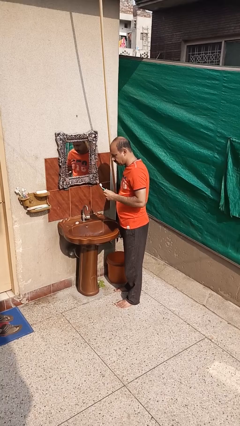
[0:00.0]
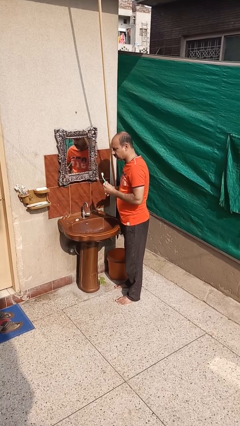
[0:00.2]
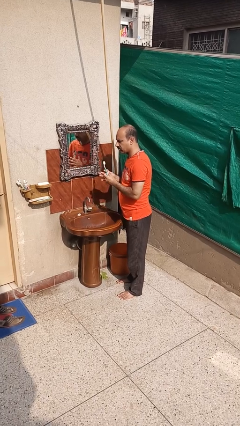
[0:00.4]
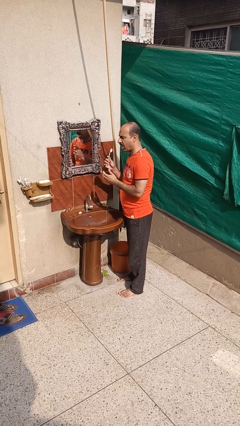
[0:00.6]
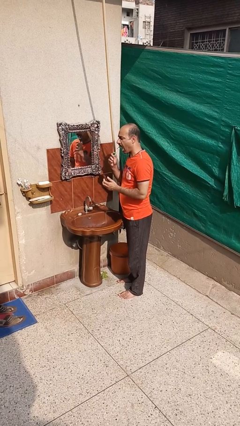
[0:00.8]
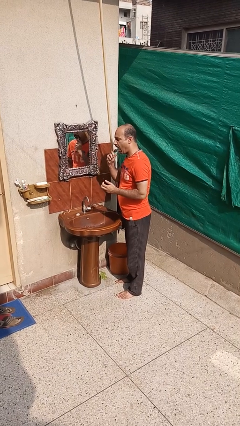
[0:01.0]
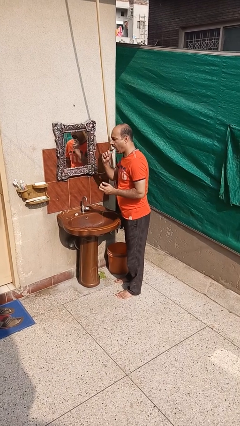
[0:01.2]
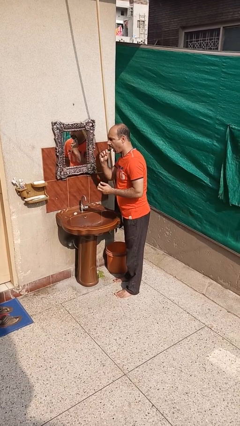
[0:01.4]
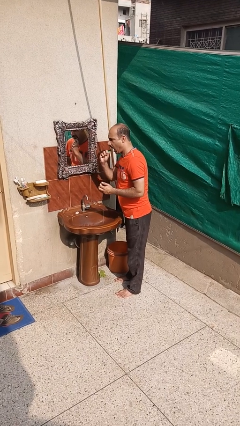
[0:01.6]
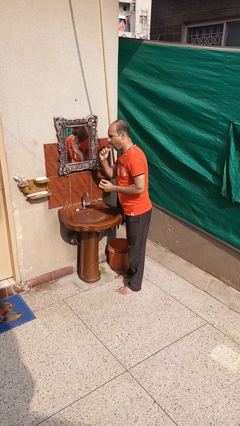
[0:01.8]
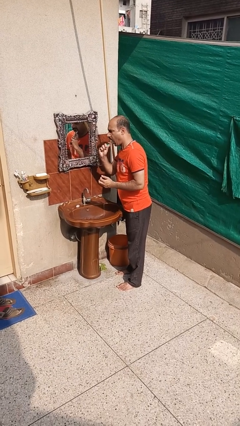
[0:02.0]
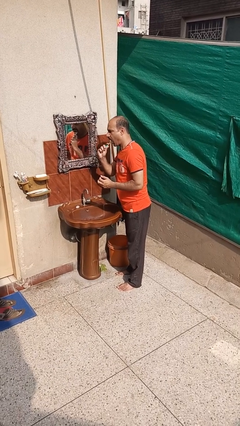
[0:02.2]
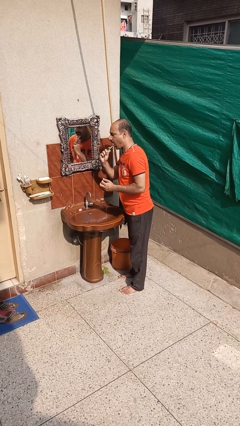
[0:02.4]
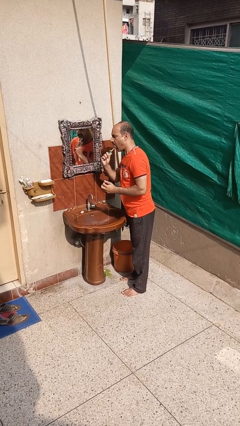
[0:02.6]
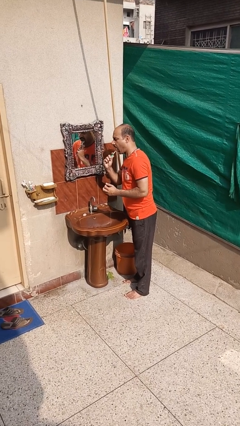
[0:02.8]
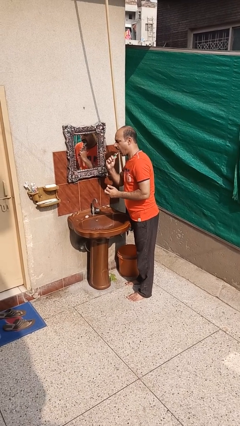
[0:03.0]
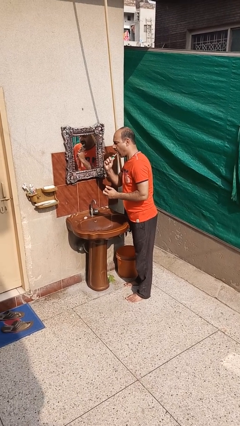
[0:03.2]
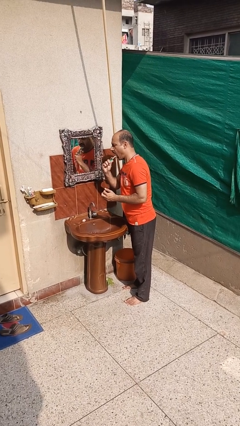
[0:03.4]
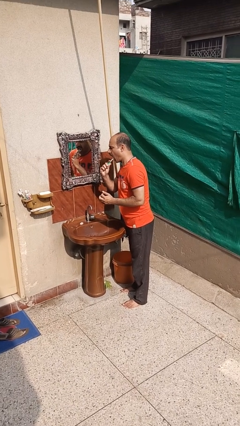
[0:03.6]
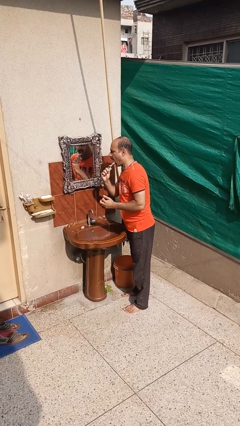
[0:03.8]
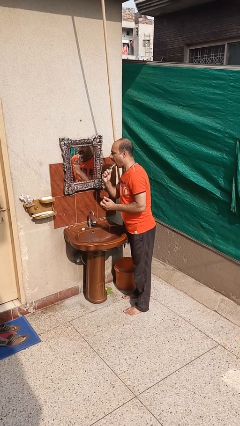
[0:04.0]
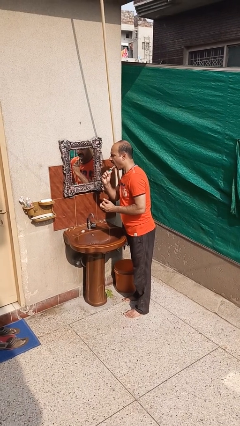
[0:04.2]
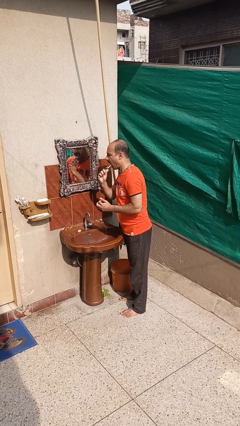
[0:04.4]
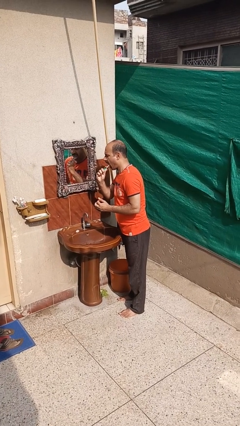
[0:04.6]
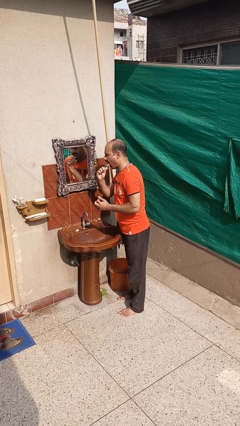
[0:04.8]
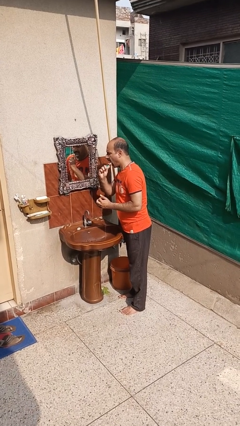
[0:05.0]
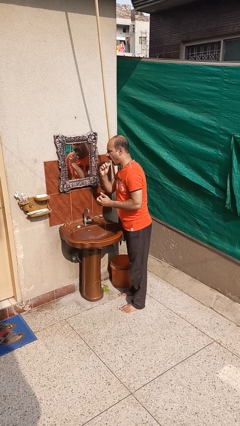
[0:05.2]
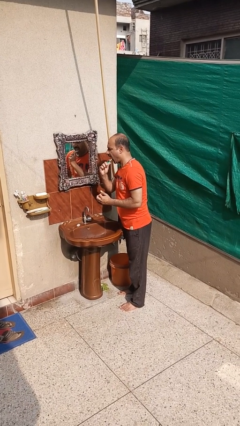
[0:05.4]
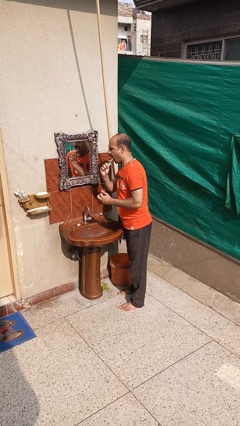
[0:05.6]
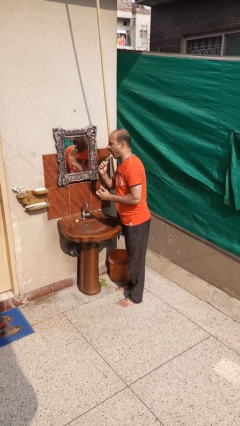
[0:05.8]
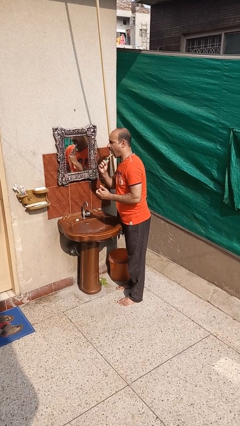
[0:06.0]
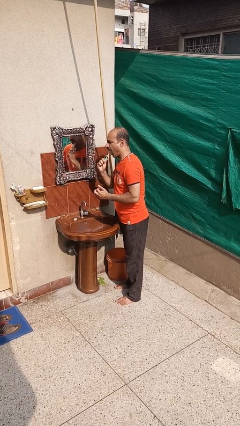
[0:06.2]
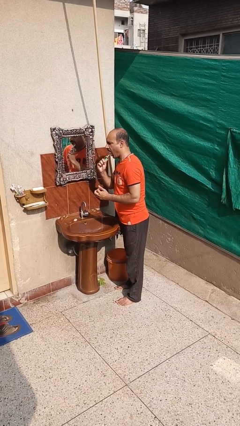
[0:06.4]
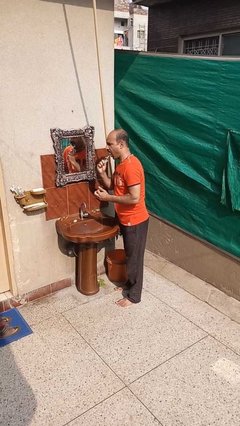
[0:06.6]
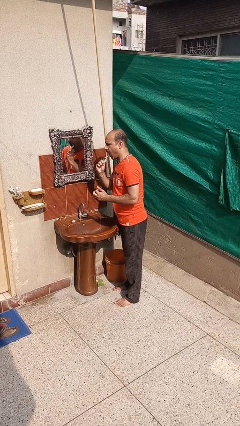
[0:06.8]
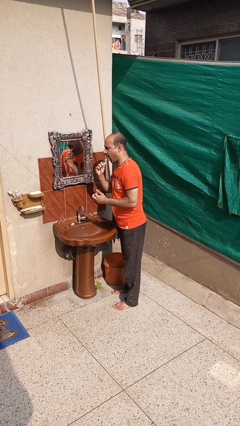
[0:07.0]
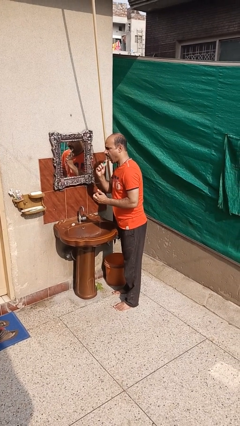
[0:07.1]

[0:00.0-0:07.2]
person brushes teeth

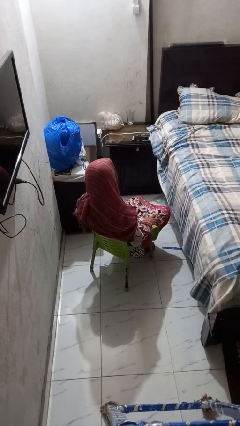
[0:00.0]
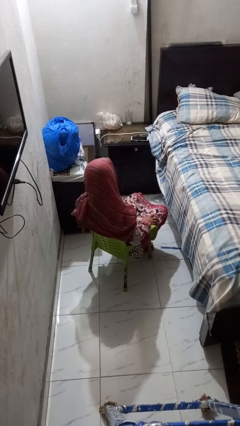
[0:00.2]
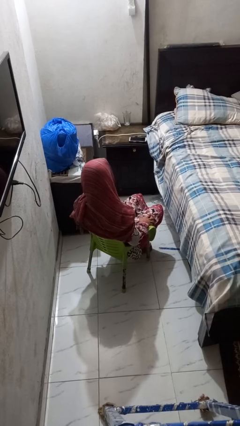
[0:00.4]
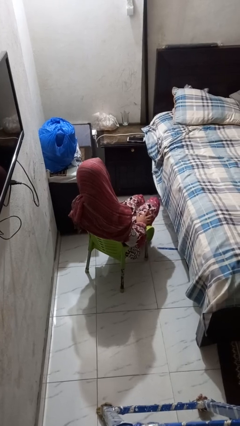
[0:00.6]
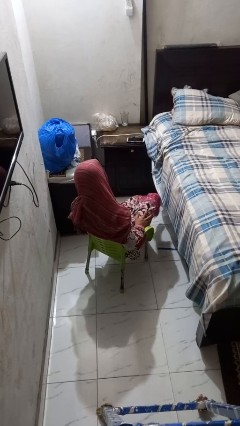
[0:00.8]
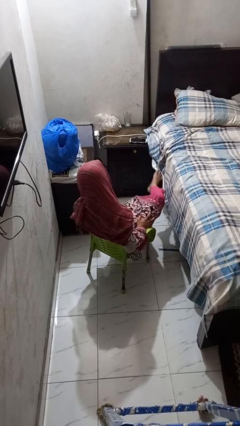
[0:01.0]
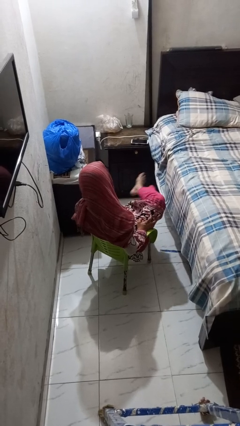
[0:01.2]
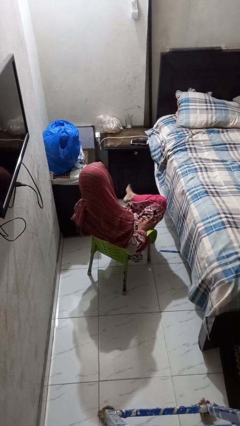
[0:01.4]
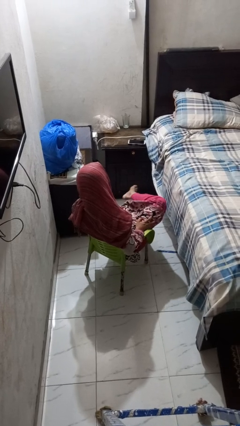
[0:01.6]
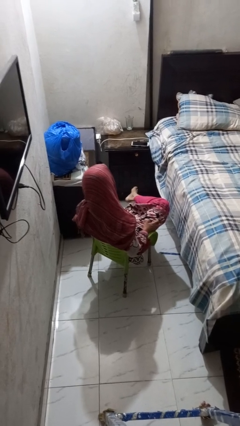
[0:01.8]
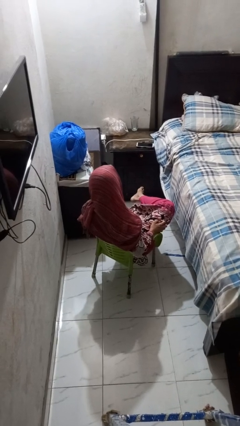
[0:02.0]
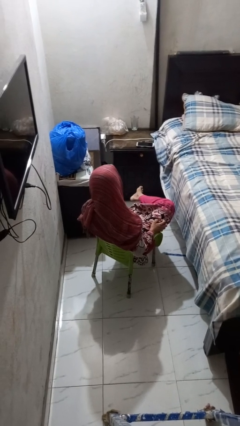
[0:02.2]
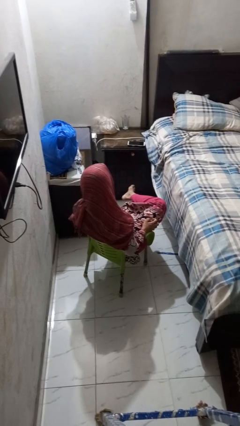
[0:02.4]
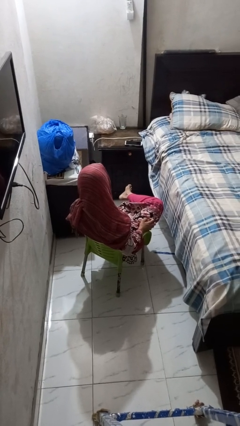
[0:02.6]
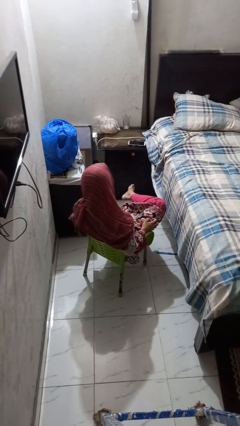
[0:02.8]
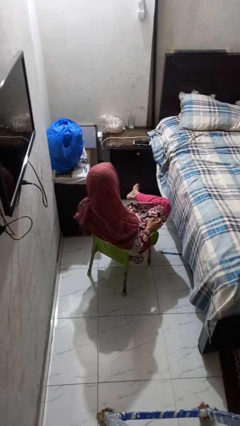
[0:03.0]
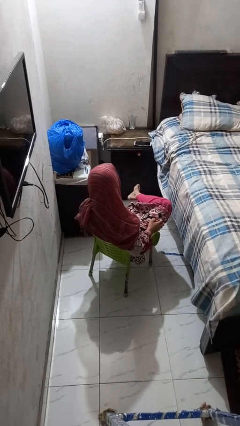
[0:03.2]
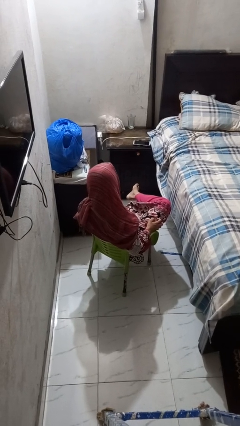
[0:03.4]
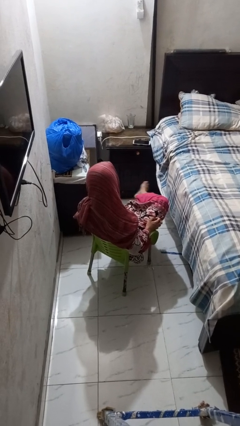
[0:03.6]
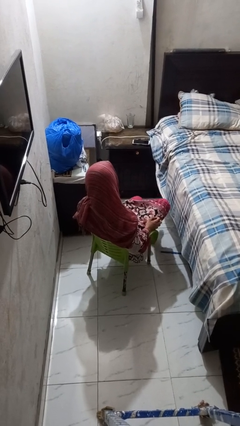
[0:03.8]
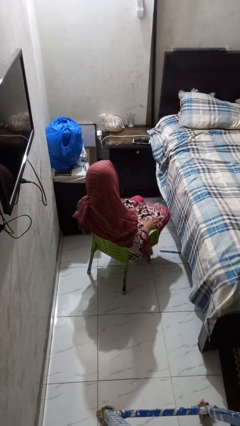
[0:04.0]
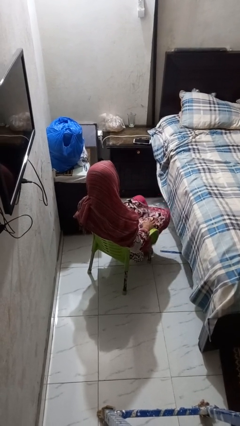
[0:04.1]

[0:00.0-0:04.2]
person crosses legs

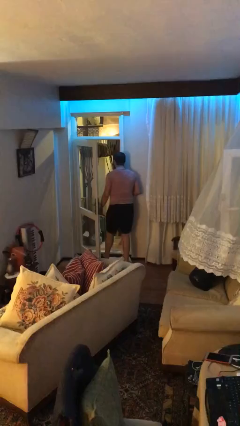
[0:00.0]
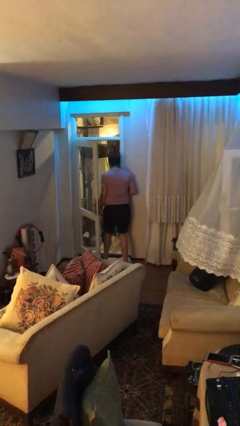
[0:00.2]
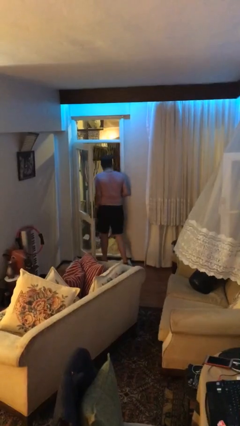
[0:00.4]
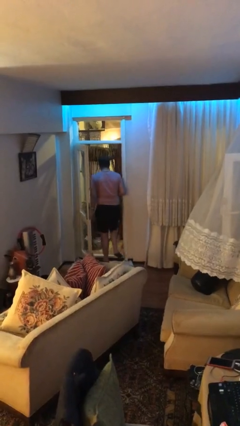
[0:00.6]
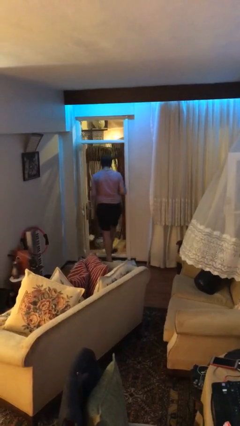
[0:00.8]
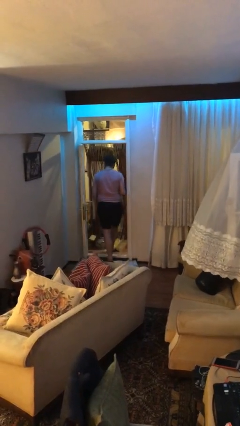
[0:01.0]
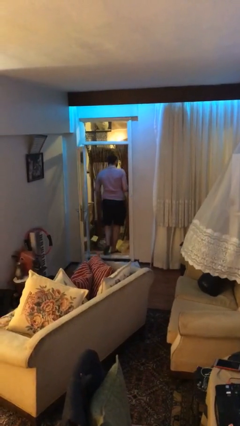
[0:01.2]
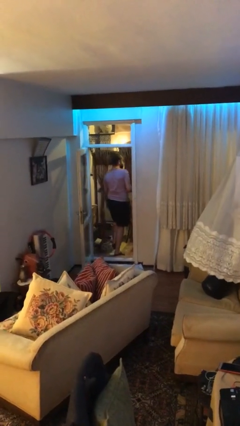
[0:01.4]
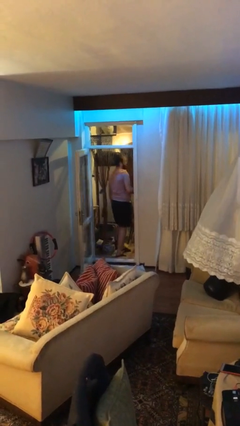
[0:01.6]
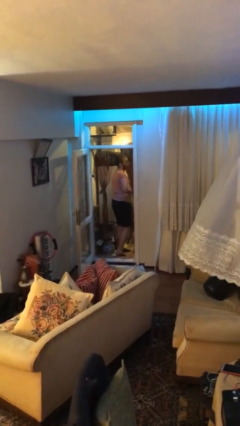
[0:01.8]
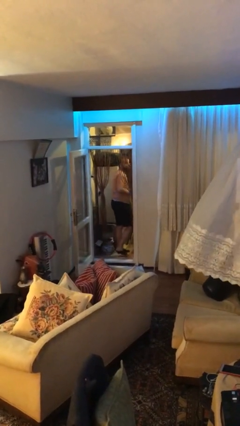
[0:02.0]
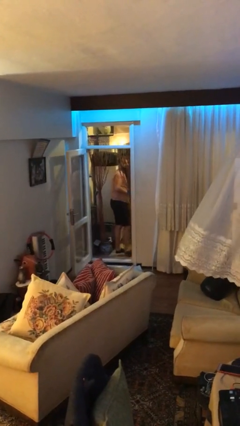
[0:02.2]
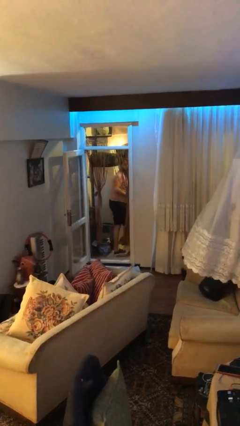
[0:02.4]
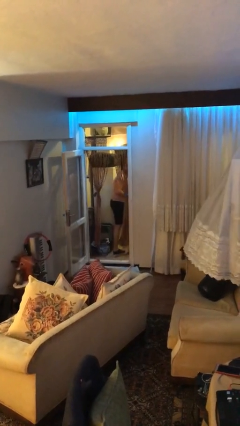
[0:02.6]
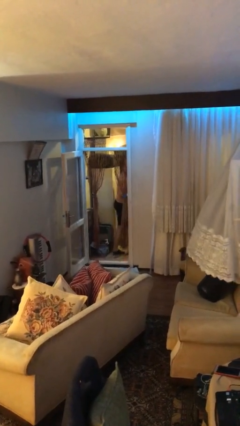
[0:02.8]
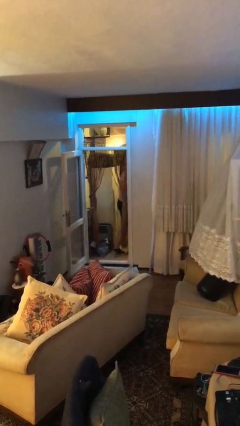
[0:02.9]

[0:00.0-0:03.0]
person exits scene through structure

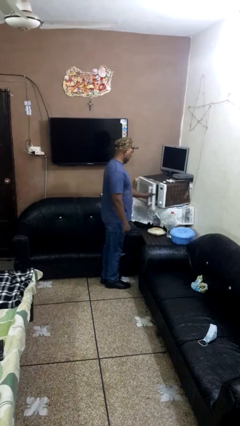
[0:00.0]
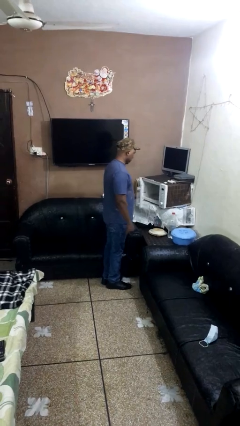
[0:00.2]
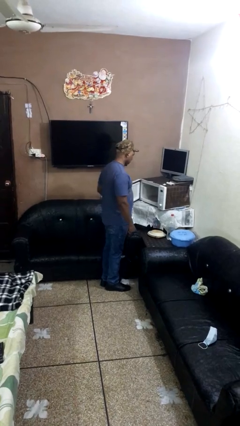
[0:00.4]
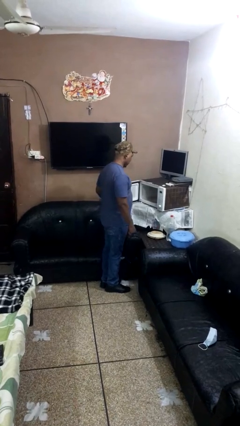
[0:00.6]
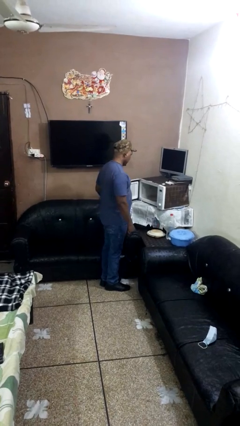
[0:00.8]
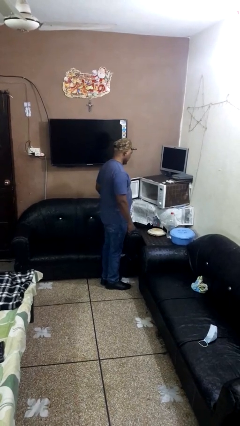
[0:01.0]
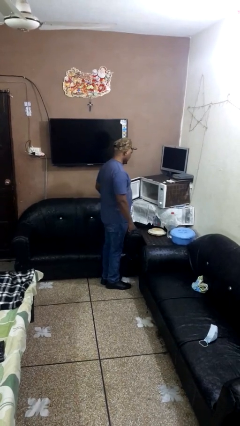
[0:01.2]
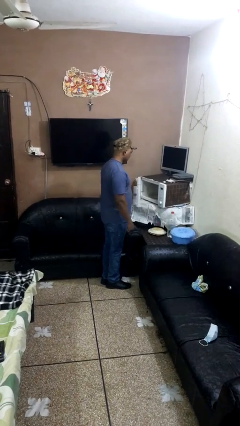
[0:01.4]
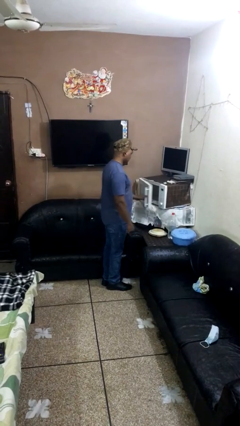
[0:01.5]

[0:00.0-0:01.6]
person opens oven door

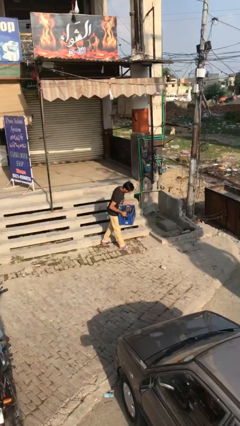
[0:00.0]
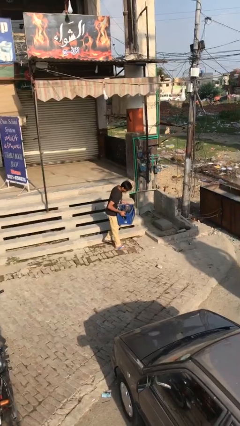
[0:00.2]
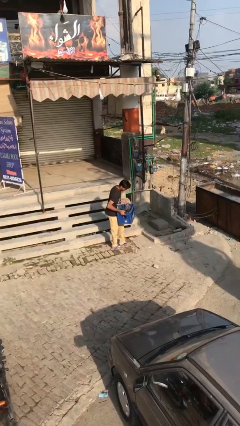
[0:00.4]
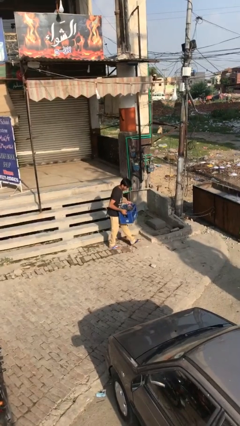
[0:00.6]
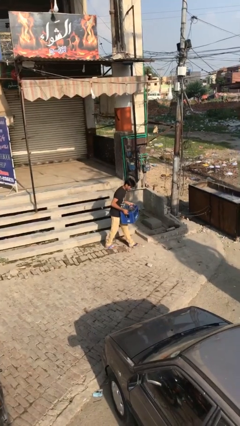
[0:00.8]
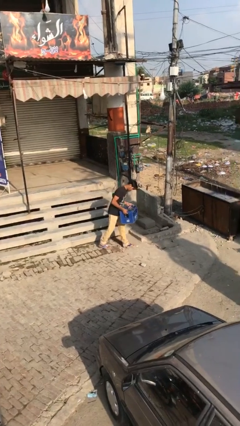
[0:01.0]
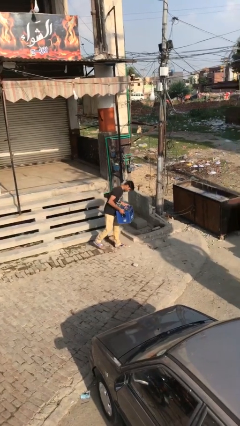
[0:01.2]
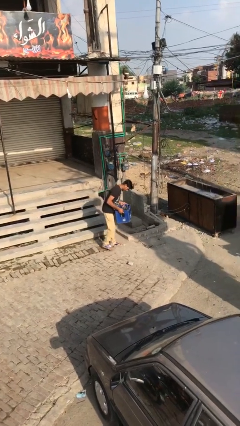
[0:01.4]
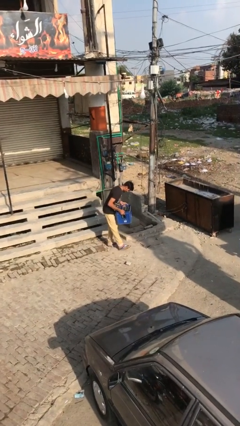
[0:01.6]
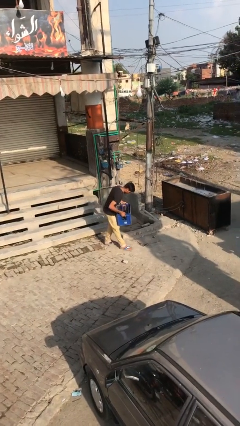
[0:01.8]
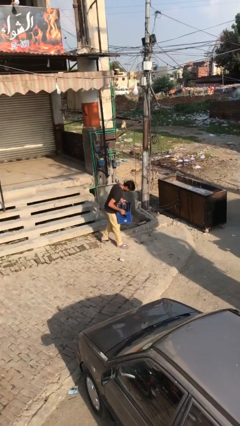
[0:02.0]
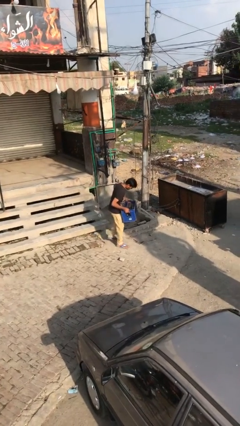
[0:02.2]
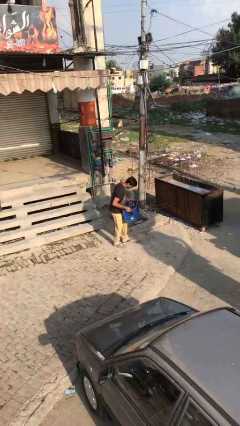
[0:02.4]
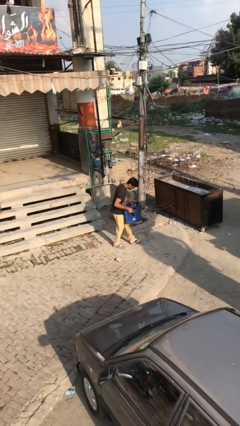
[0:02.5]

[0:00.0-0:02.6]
person carries heavy object
